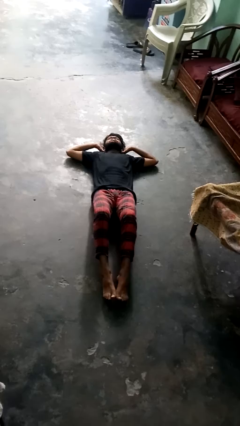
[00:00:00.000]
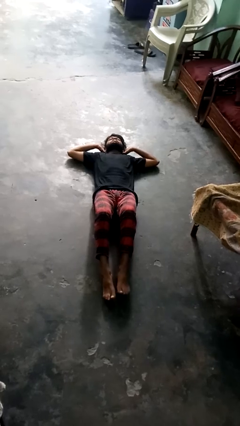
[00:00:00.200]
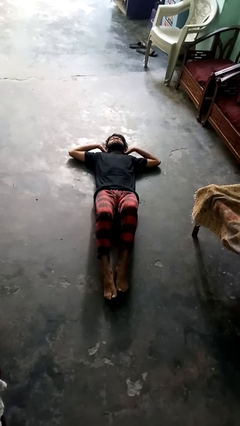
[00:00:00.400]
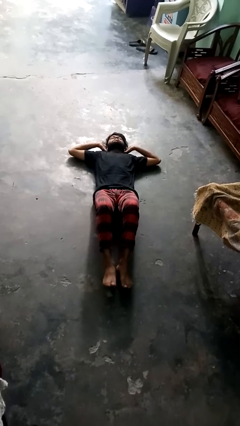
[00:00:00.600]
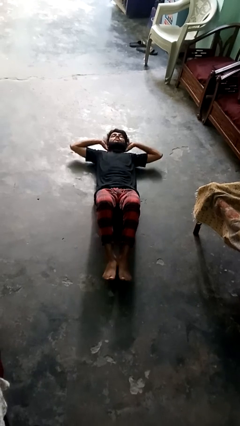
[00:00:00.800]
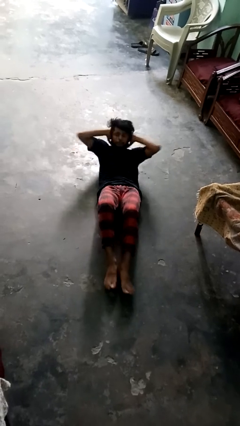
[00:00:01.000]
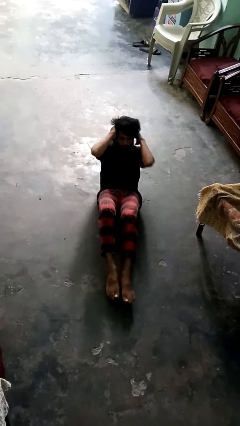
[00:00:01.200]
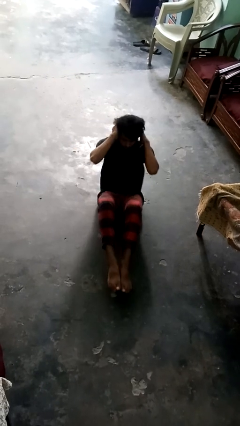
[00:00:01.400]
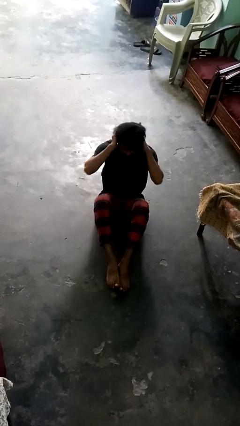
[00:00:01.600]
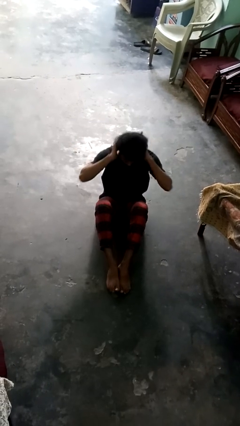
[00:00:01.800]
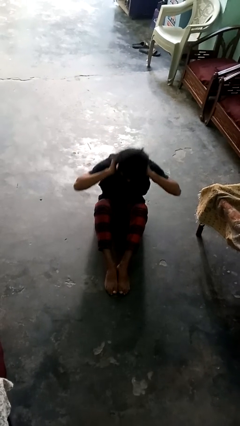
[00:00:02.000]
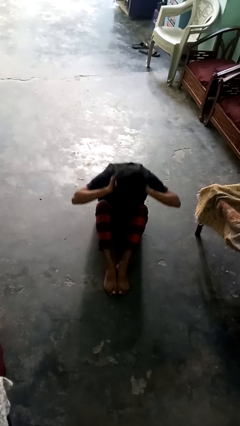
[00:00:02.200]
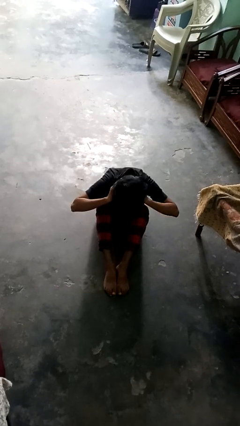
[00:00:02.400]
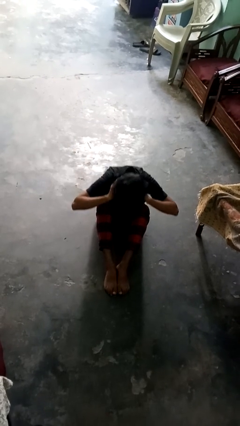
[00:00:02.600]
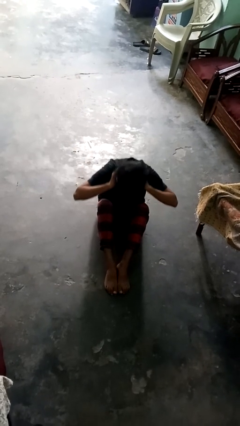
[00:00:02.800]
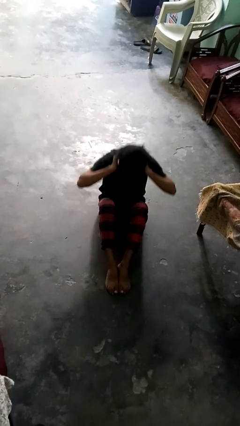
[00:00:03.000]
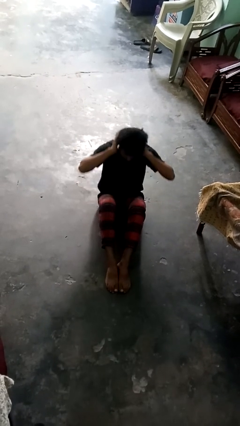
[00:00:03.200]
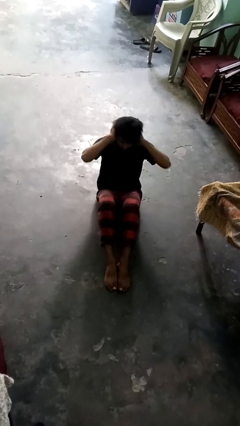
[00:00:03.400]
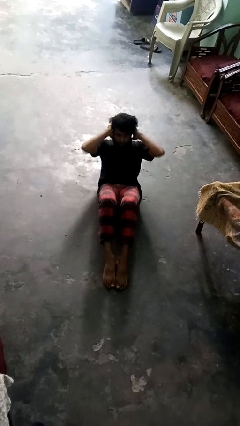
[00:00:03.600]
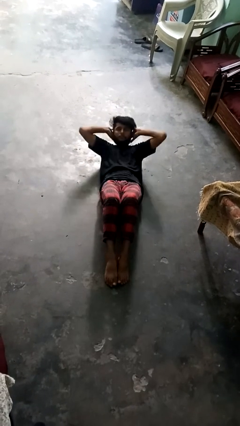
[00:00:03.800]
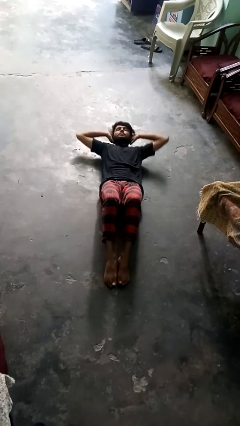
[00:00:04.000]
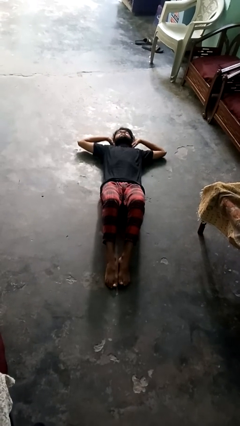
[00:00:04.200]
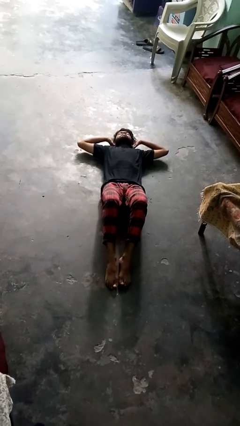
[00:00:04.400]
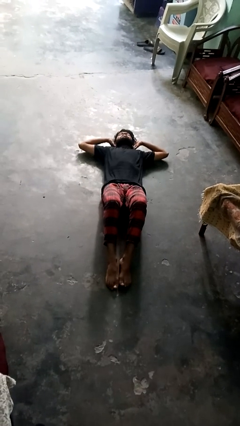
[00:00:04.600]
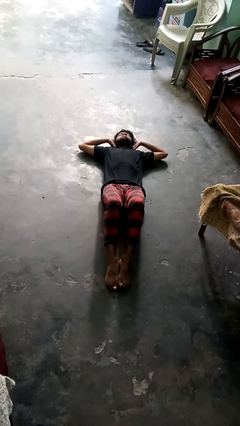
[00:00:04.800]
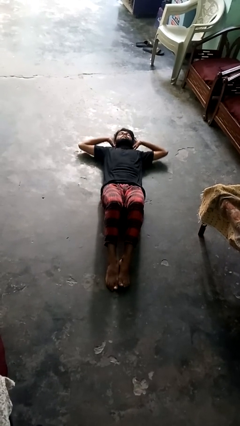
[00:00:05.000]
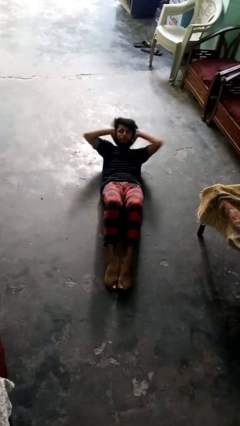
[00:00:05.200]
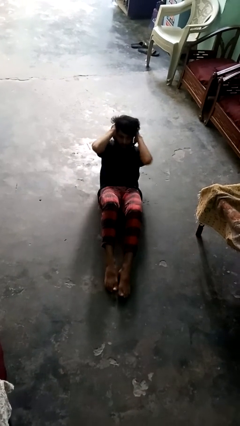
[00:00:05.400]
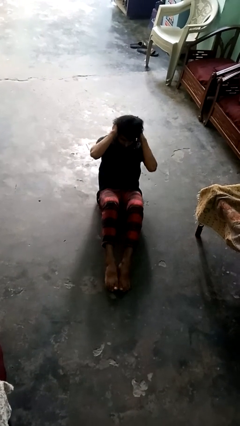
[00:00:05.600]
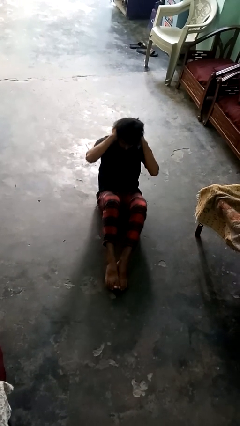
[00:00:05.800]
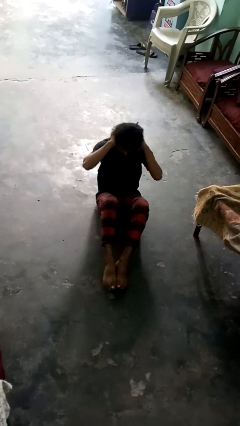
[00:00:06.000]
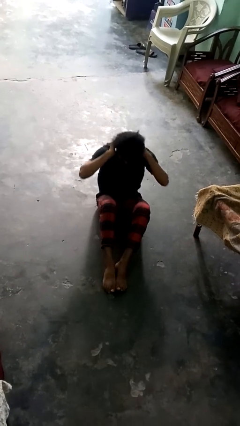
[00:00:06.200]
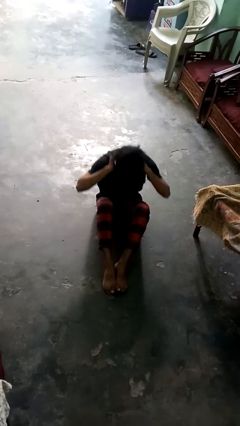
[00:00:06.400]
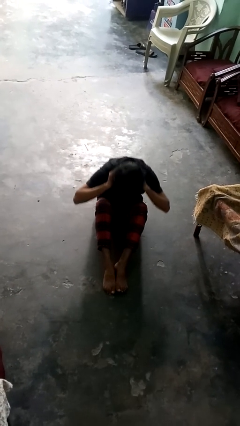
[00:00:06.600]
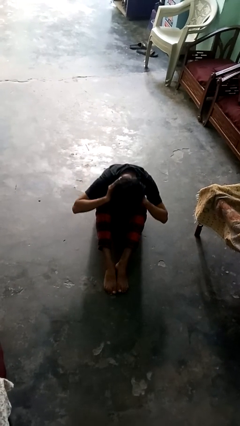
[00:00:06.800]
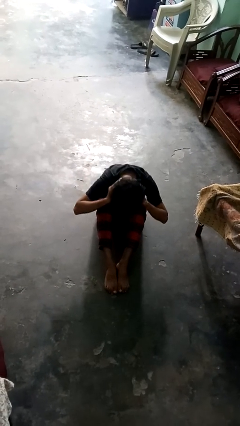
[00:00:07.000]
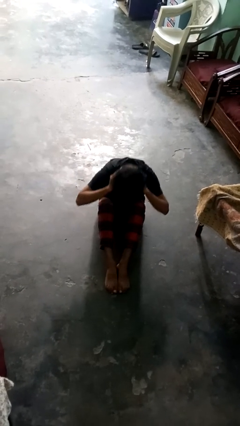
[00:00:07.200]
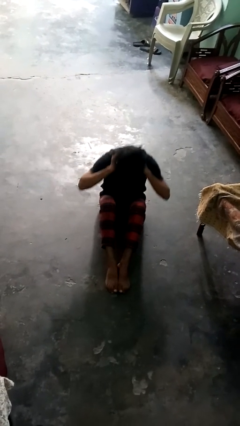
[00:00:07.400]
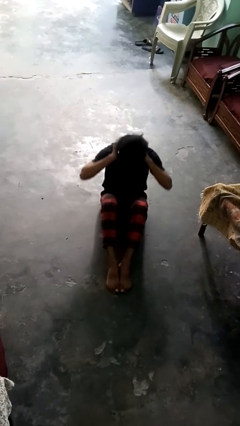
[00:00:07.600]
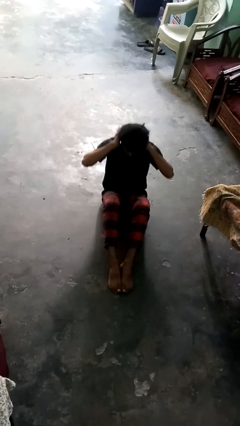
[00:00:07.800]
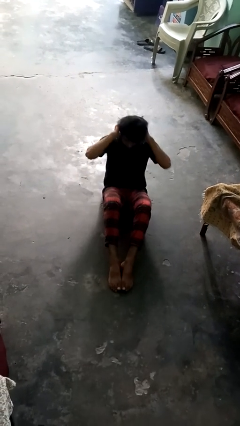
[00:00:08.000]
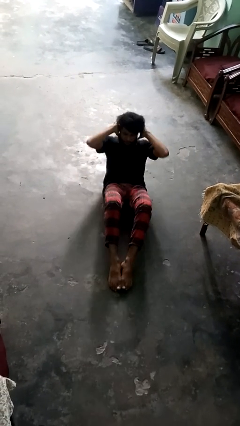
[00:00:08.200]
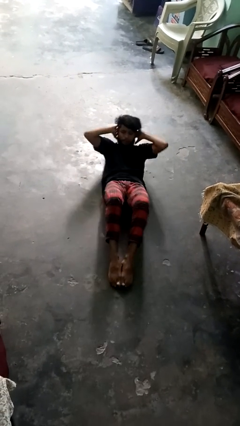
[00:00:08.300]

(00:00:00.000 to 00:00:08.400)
person exercises with situp

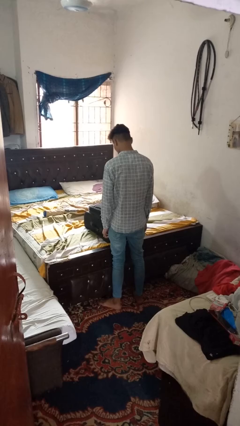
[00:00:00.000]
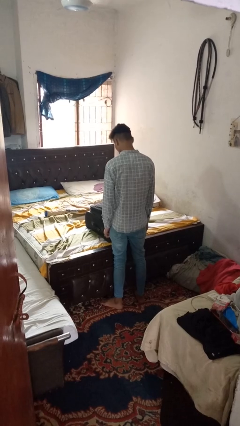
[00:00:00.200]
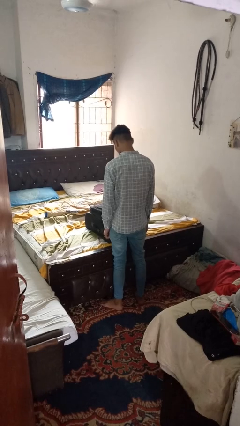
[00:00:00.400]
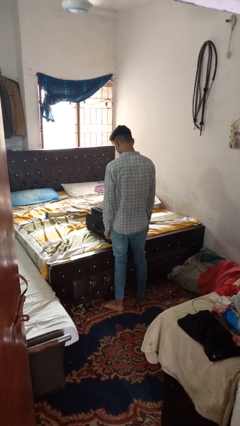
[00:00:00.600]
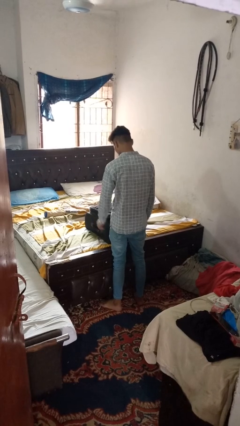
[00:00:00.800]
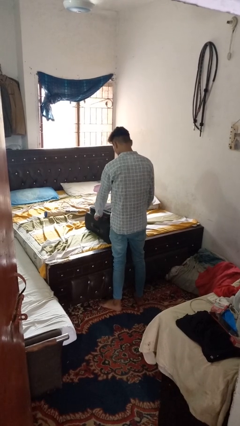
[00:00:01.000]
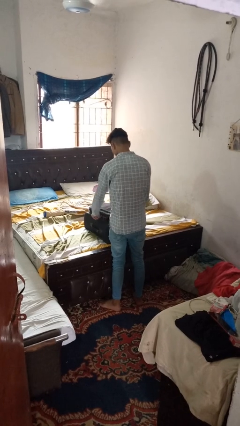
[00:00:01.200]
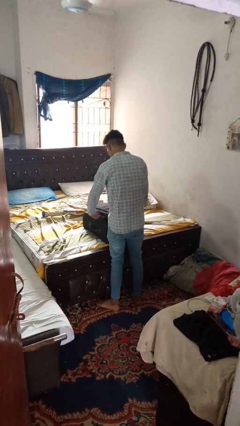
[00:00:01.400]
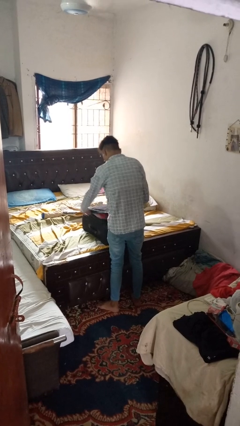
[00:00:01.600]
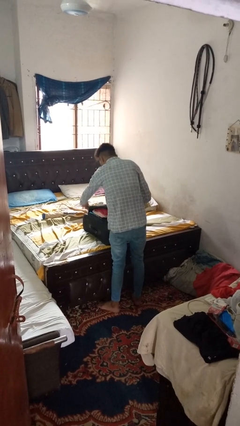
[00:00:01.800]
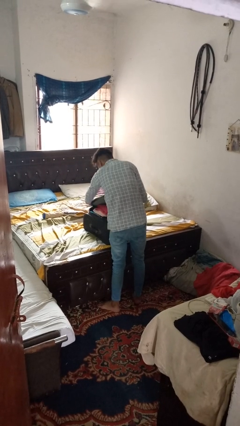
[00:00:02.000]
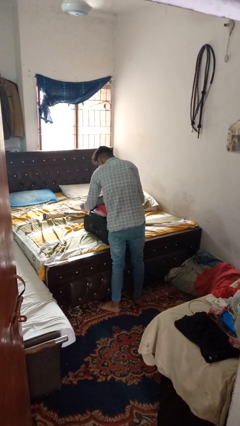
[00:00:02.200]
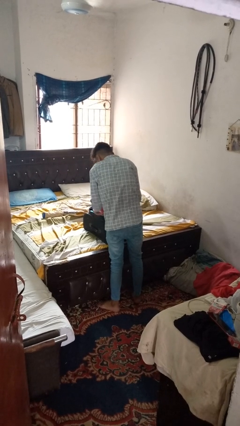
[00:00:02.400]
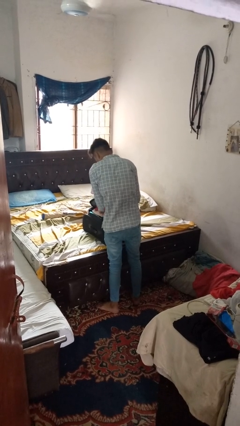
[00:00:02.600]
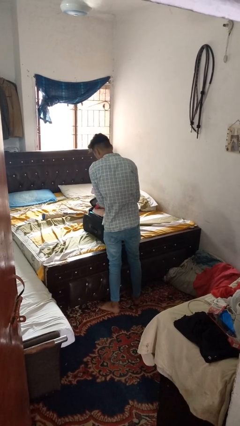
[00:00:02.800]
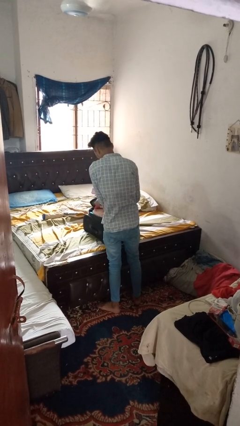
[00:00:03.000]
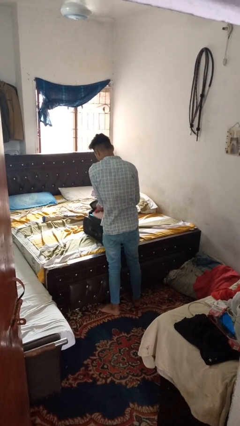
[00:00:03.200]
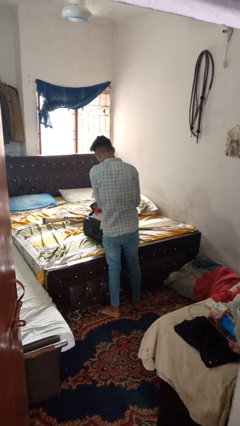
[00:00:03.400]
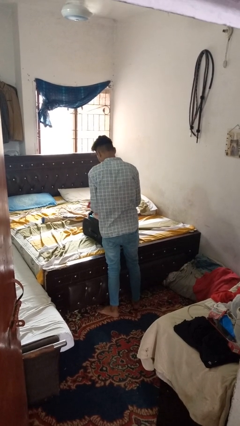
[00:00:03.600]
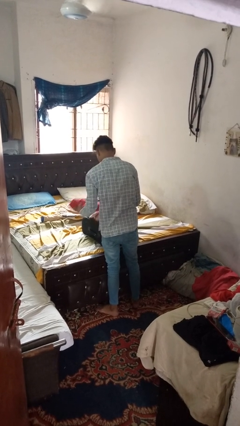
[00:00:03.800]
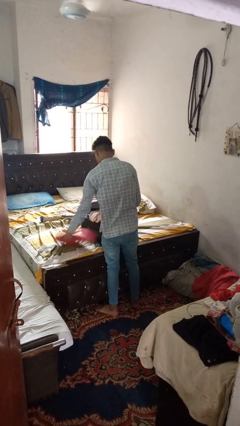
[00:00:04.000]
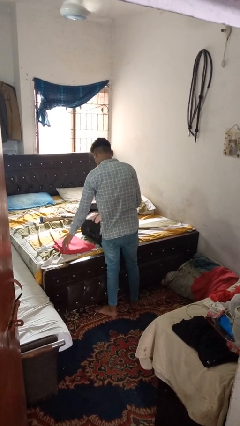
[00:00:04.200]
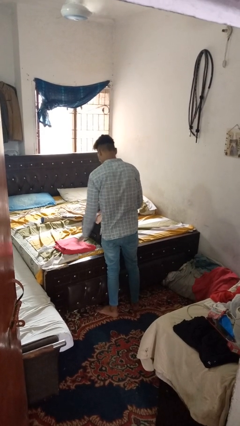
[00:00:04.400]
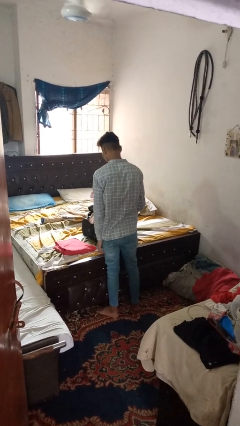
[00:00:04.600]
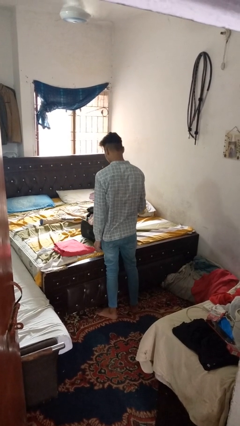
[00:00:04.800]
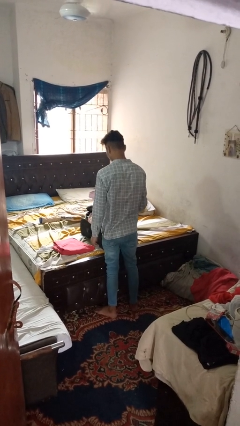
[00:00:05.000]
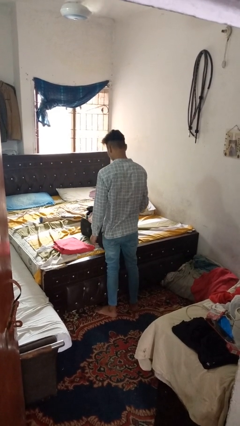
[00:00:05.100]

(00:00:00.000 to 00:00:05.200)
person unloads clothes from suitcase

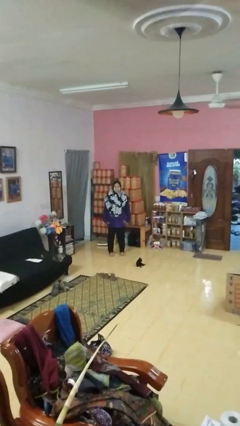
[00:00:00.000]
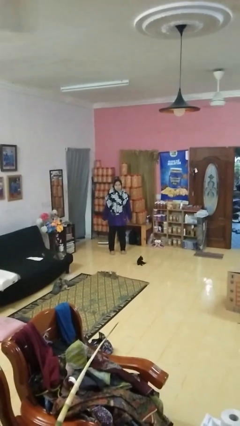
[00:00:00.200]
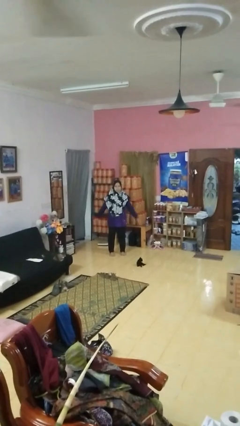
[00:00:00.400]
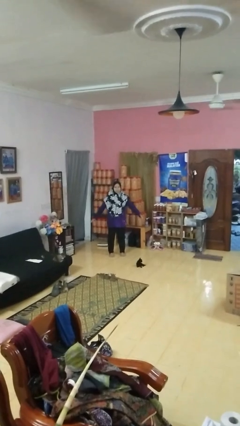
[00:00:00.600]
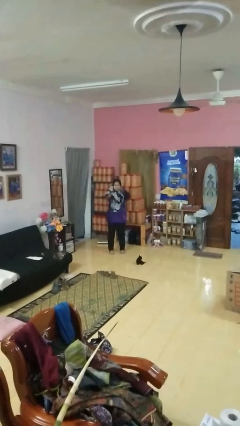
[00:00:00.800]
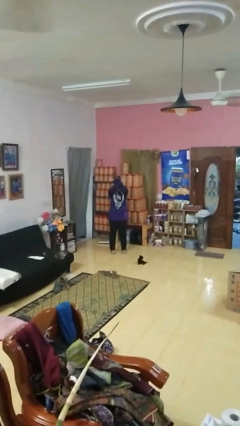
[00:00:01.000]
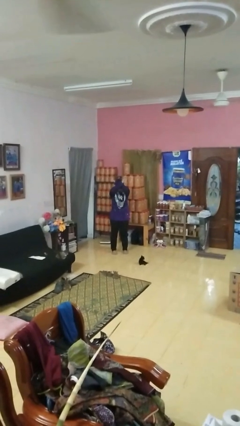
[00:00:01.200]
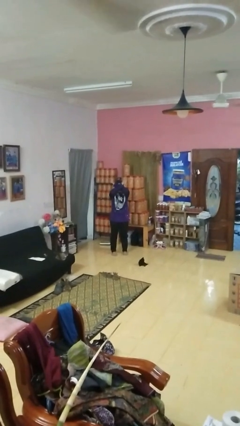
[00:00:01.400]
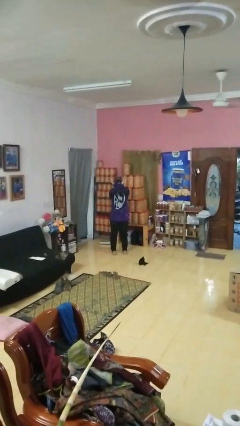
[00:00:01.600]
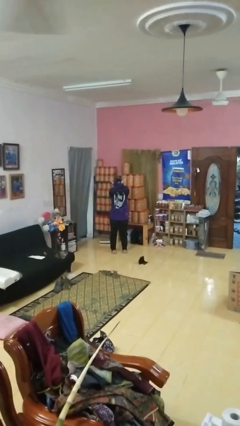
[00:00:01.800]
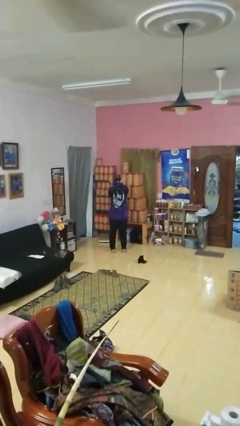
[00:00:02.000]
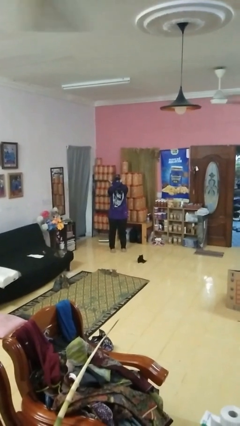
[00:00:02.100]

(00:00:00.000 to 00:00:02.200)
person gestures arms x

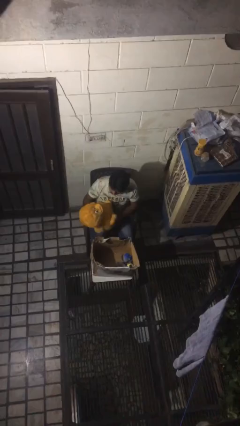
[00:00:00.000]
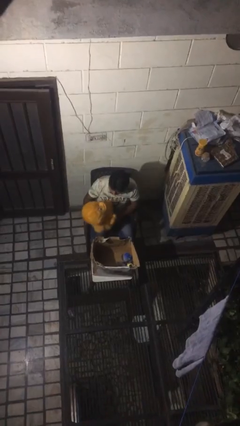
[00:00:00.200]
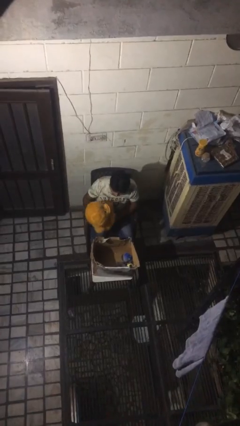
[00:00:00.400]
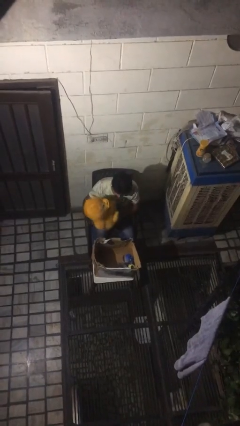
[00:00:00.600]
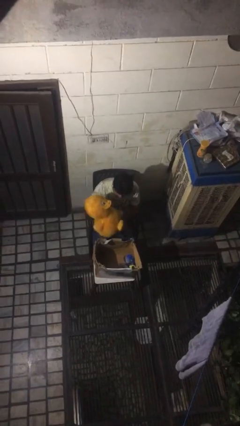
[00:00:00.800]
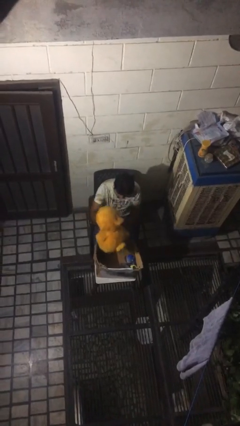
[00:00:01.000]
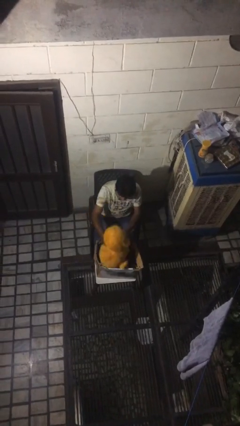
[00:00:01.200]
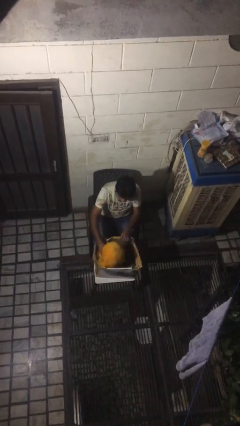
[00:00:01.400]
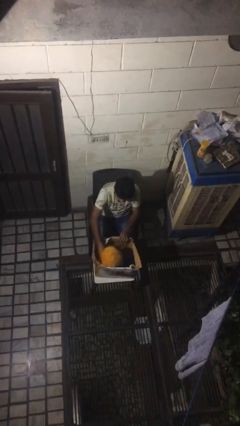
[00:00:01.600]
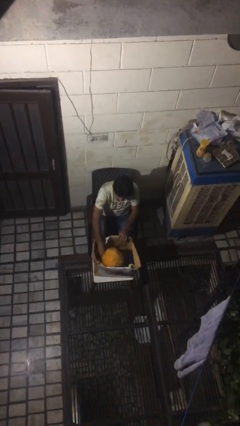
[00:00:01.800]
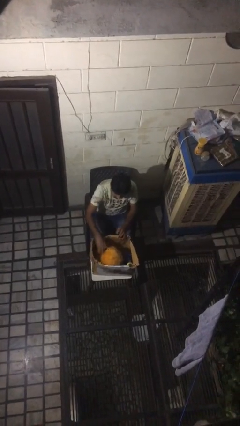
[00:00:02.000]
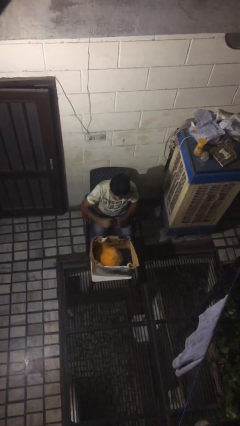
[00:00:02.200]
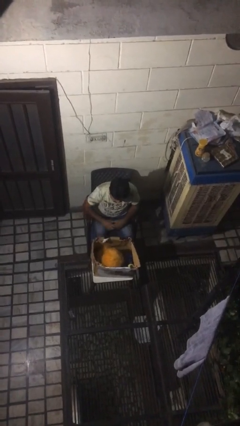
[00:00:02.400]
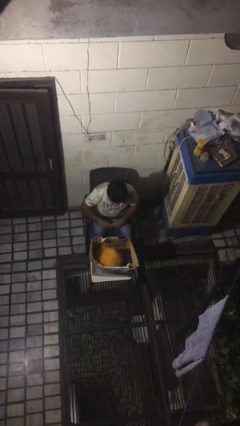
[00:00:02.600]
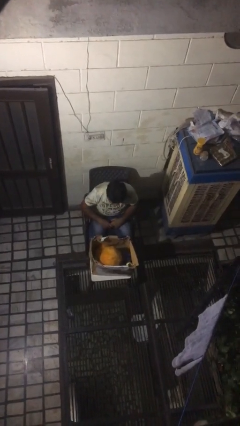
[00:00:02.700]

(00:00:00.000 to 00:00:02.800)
person puts object into box
